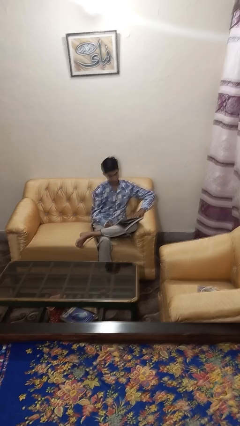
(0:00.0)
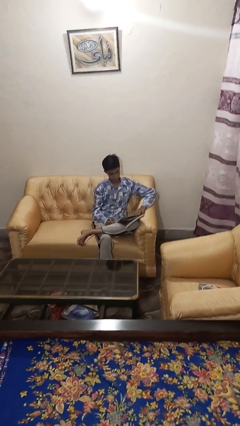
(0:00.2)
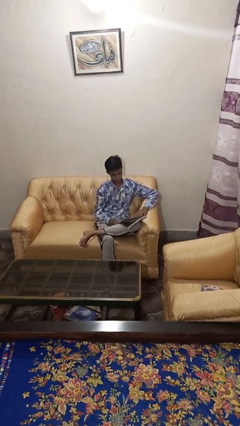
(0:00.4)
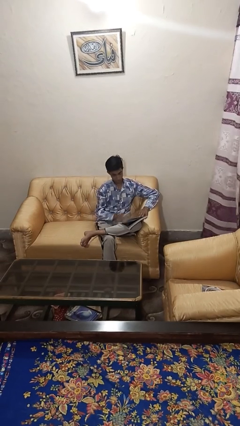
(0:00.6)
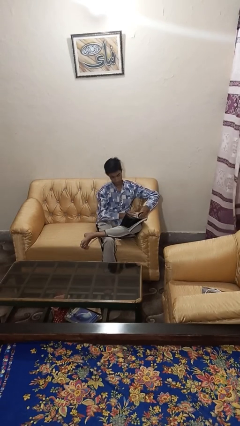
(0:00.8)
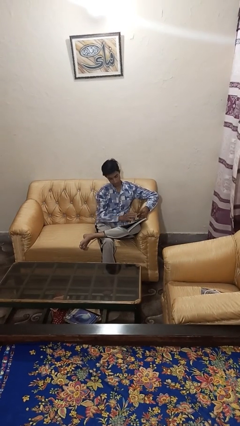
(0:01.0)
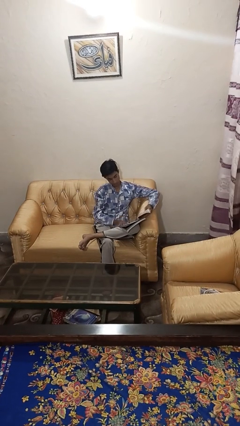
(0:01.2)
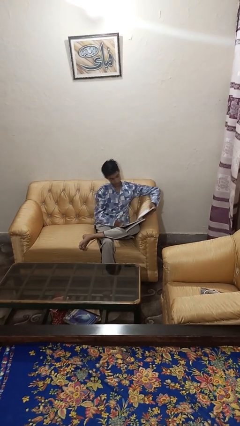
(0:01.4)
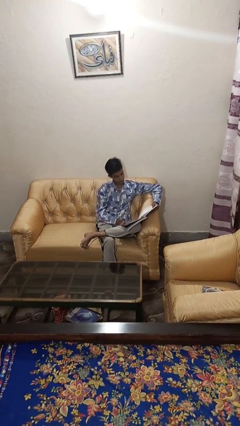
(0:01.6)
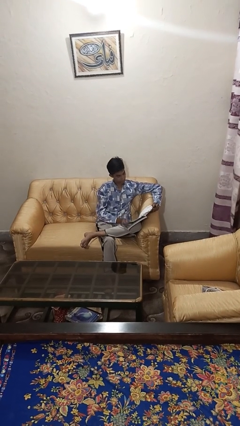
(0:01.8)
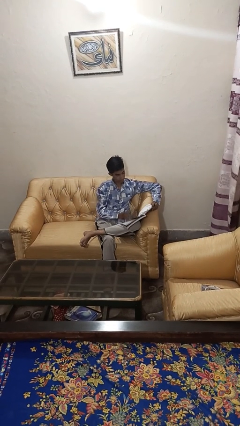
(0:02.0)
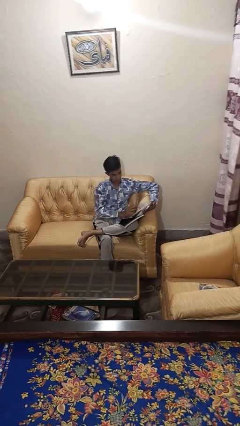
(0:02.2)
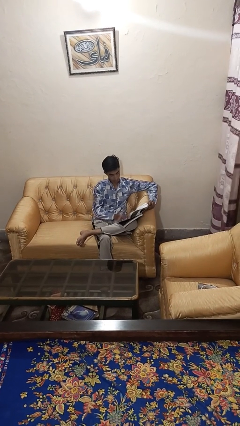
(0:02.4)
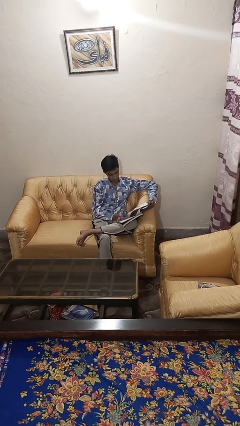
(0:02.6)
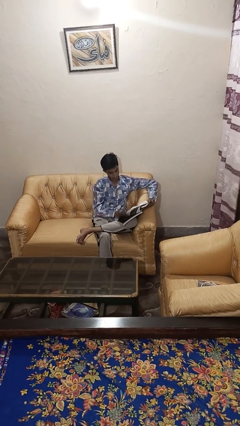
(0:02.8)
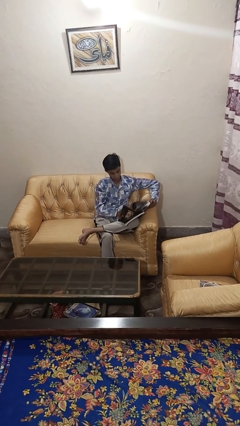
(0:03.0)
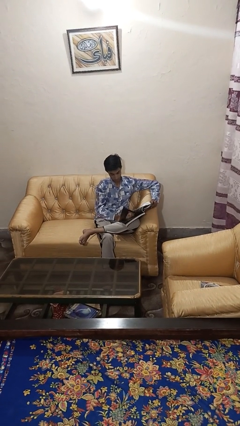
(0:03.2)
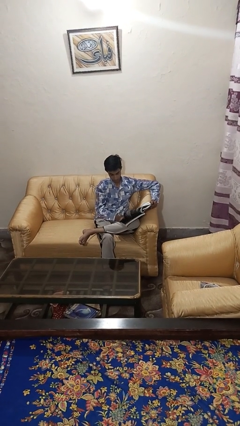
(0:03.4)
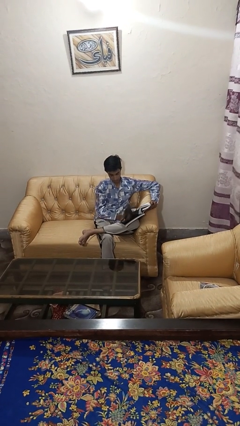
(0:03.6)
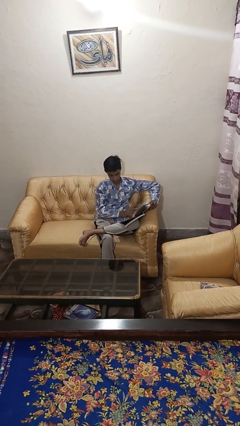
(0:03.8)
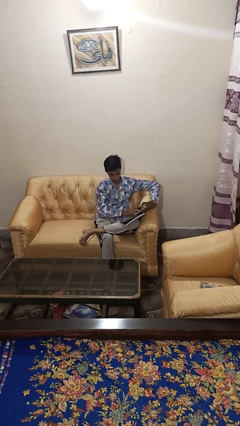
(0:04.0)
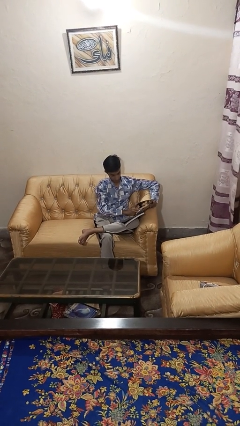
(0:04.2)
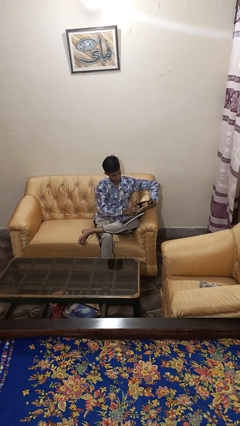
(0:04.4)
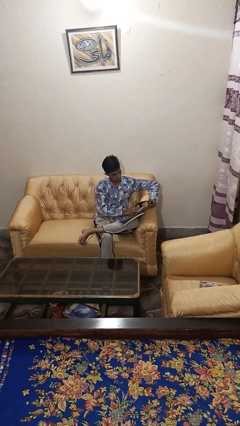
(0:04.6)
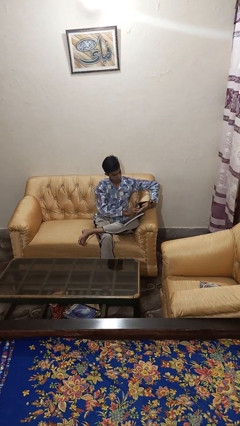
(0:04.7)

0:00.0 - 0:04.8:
person reads magazine

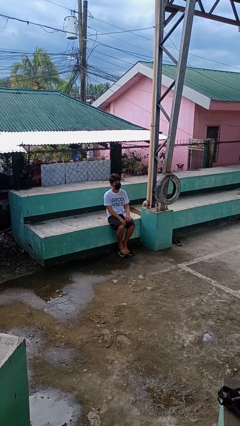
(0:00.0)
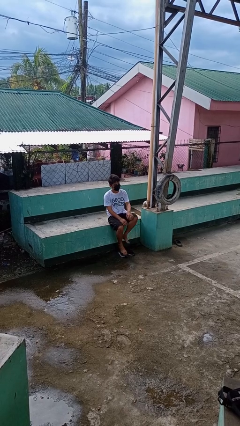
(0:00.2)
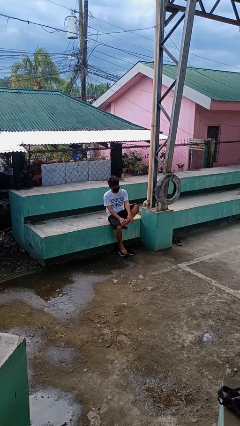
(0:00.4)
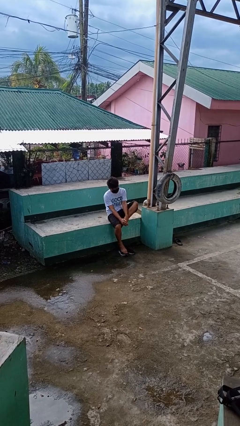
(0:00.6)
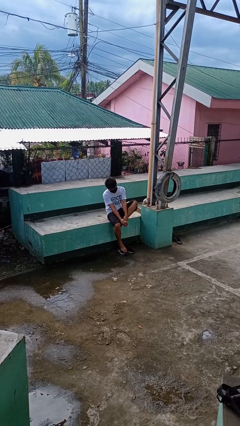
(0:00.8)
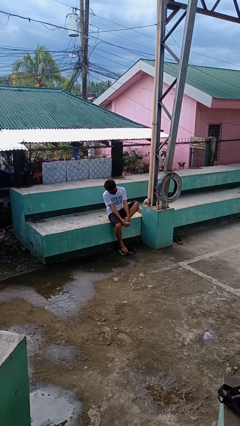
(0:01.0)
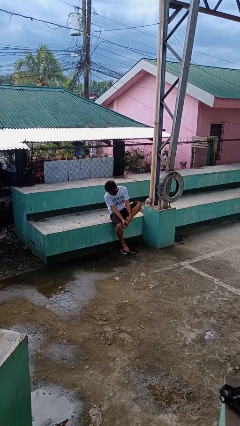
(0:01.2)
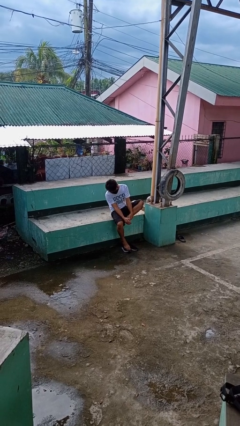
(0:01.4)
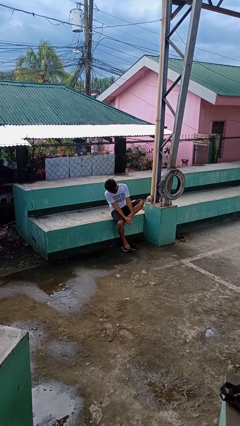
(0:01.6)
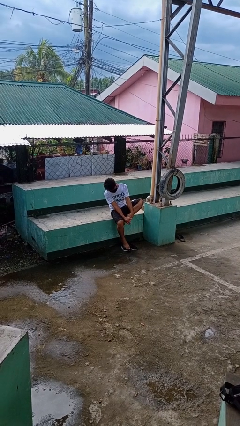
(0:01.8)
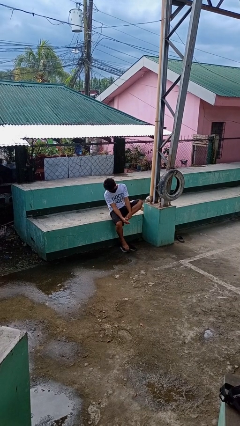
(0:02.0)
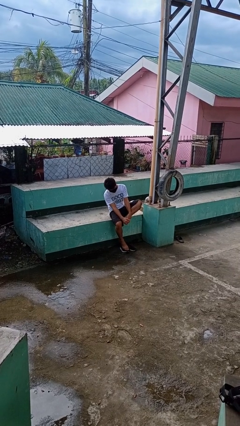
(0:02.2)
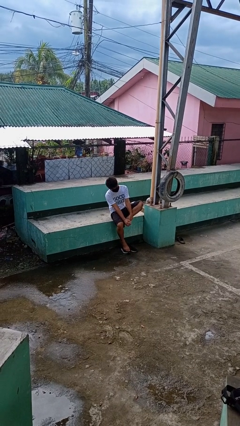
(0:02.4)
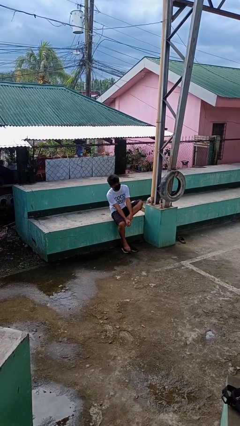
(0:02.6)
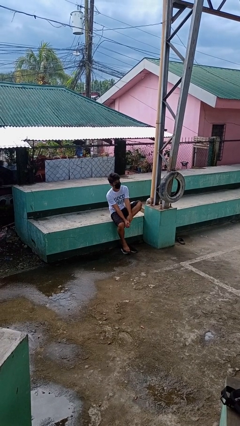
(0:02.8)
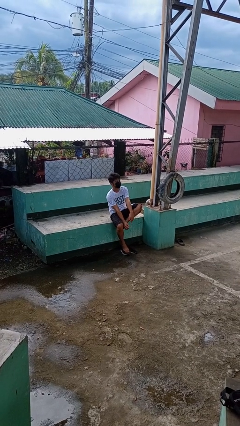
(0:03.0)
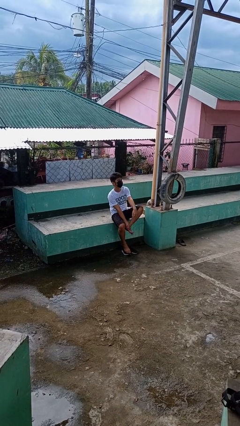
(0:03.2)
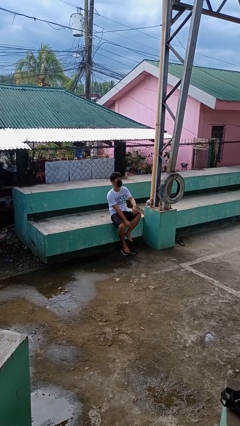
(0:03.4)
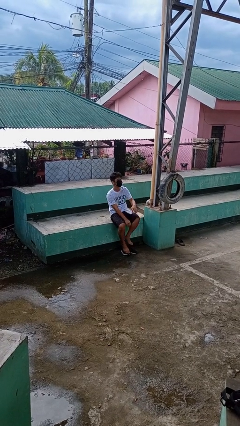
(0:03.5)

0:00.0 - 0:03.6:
person rubs foot

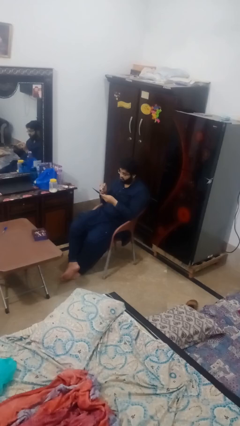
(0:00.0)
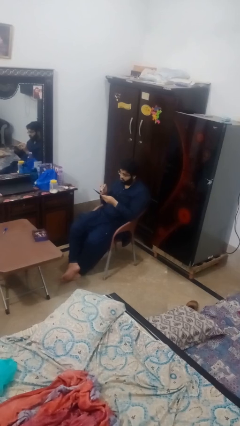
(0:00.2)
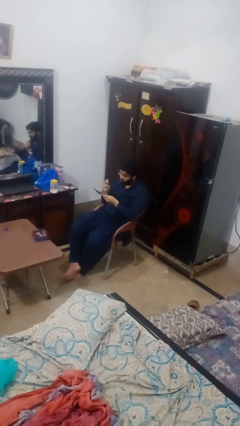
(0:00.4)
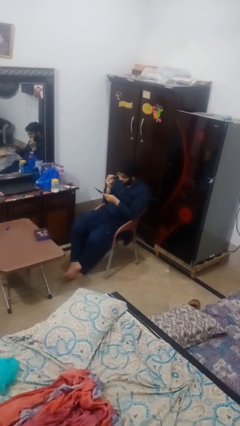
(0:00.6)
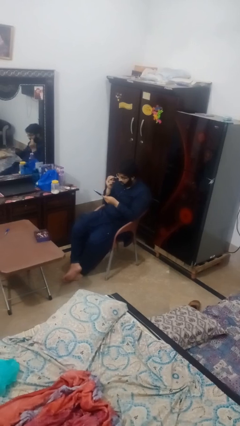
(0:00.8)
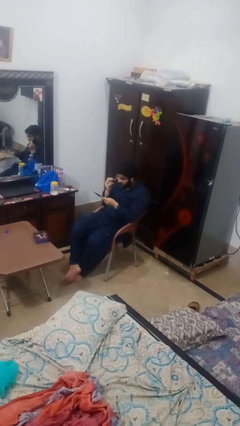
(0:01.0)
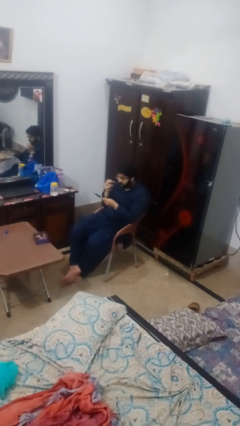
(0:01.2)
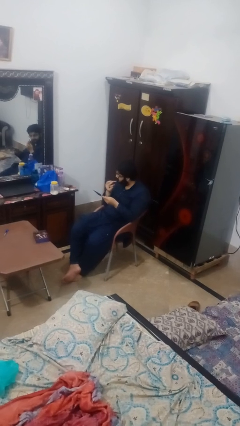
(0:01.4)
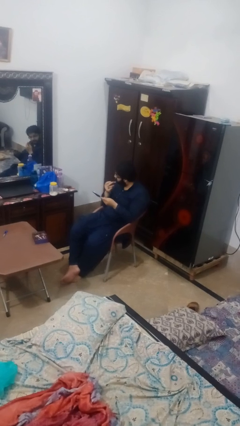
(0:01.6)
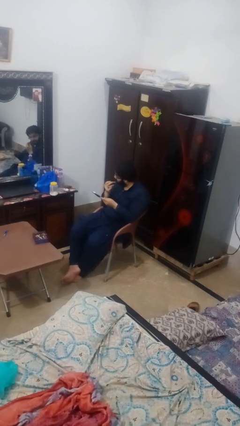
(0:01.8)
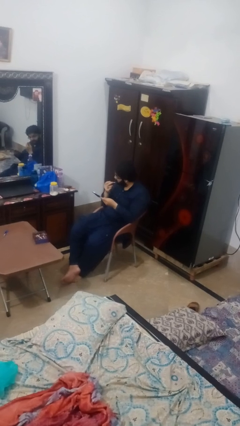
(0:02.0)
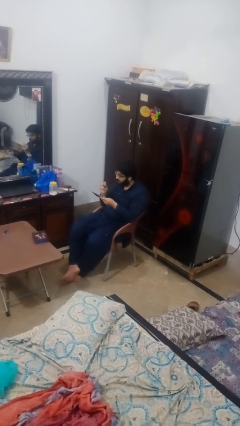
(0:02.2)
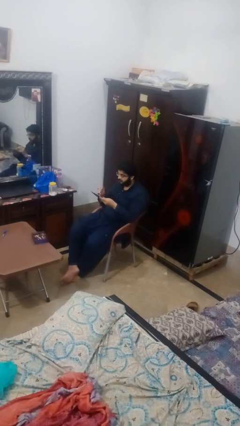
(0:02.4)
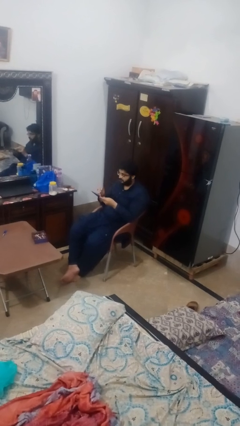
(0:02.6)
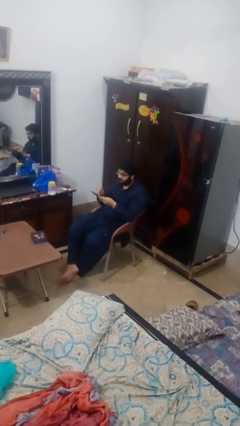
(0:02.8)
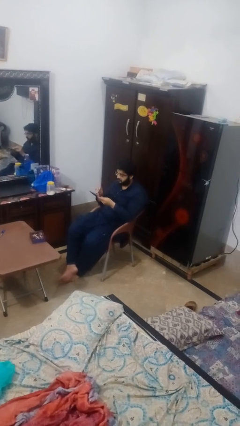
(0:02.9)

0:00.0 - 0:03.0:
person applies foundation makeup

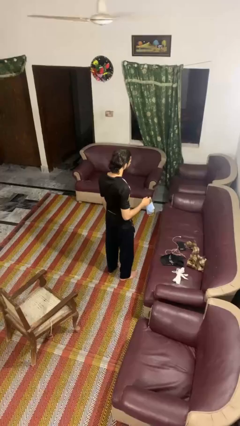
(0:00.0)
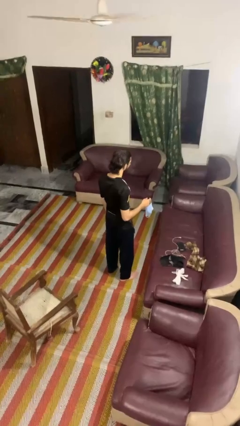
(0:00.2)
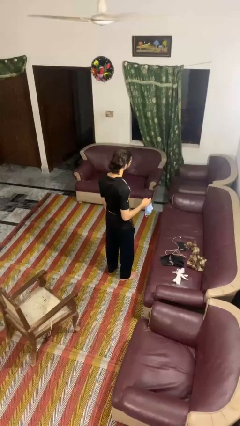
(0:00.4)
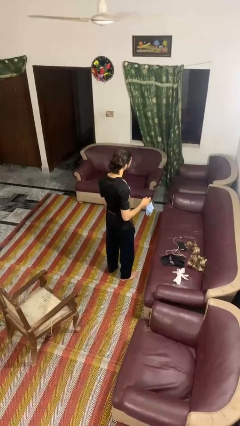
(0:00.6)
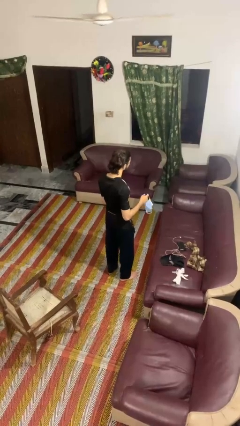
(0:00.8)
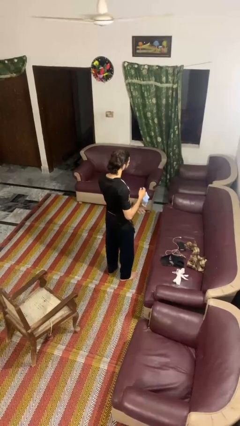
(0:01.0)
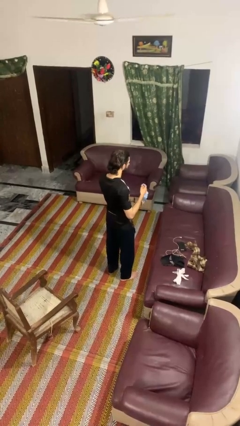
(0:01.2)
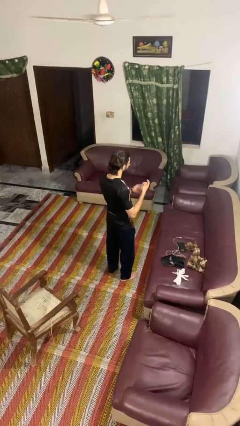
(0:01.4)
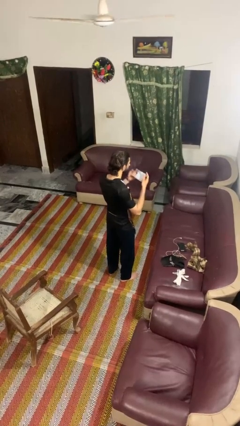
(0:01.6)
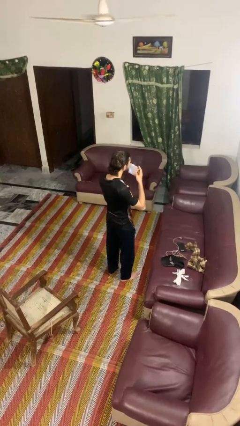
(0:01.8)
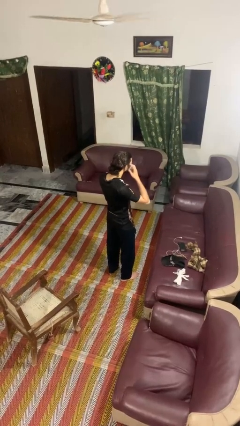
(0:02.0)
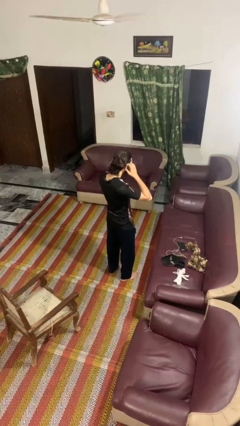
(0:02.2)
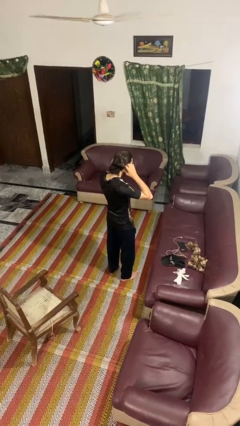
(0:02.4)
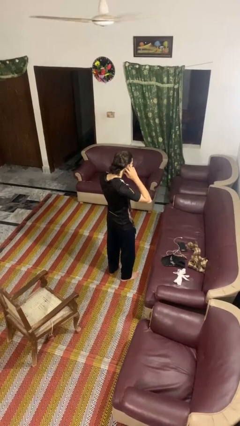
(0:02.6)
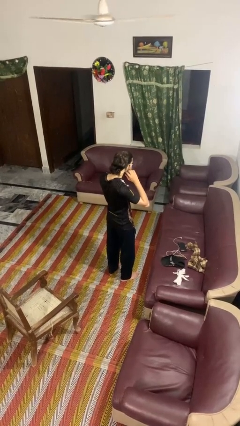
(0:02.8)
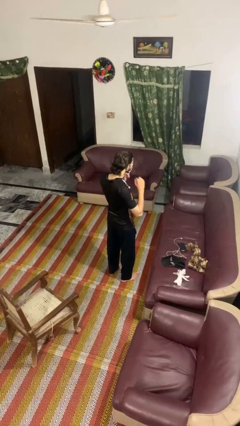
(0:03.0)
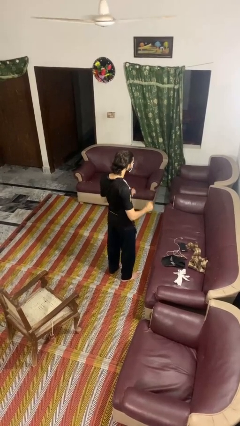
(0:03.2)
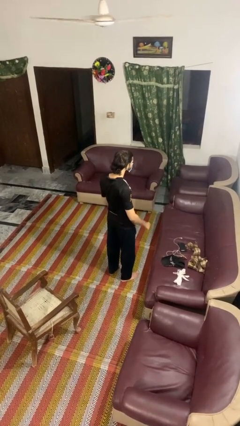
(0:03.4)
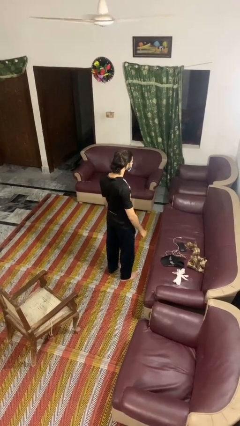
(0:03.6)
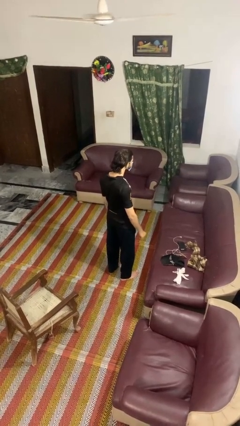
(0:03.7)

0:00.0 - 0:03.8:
person puts on facemask

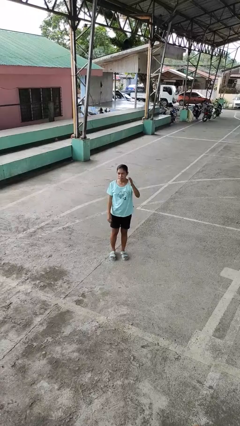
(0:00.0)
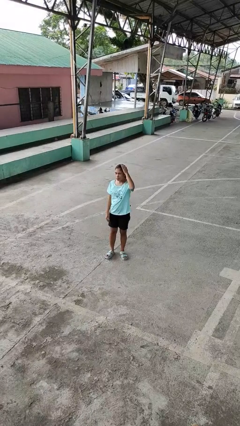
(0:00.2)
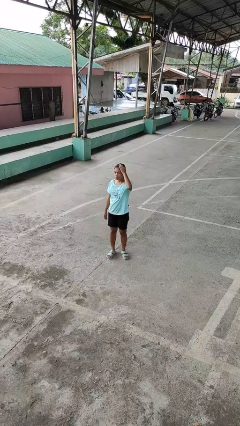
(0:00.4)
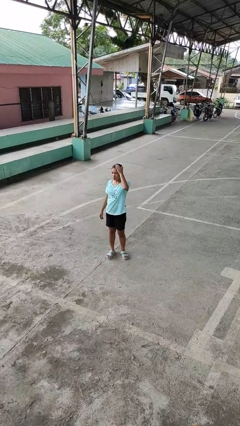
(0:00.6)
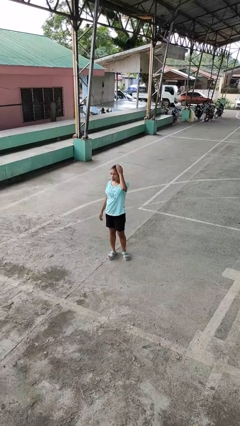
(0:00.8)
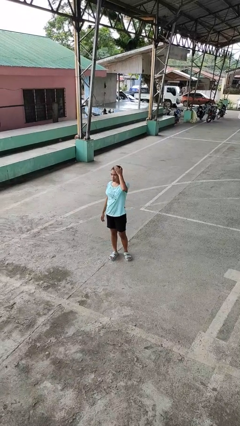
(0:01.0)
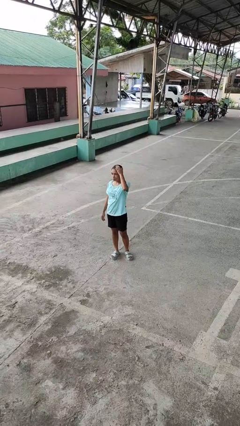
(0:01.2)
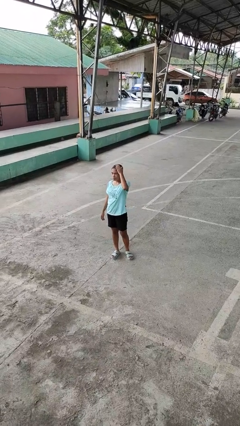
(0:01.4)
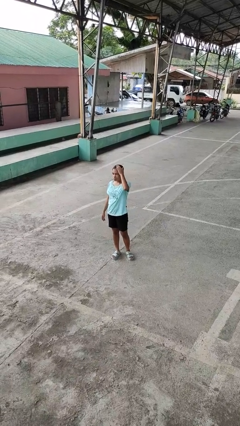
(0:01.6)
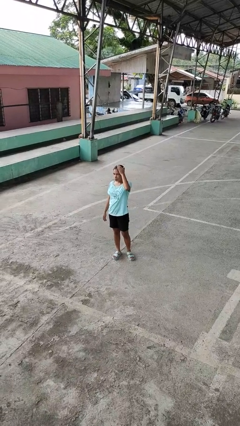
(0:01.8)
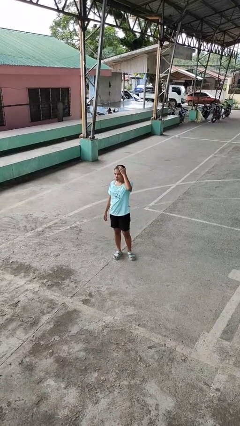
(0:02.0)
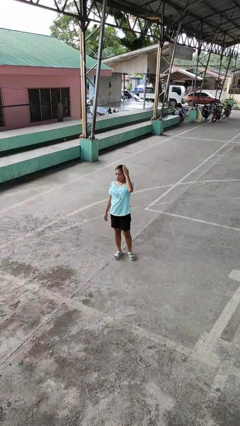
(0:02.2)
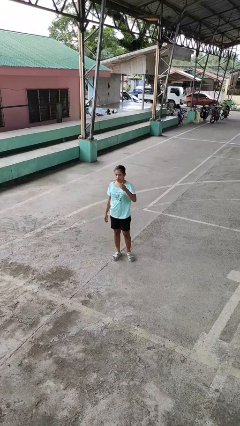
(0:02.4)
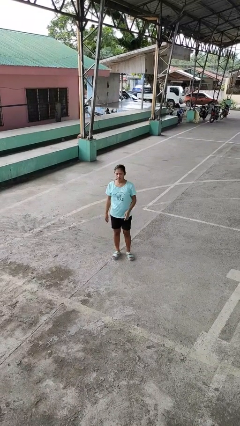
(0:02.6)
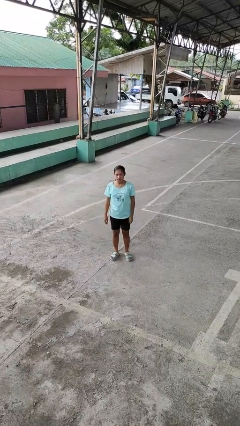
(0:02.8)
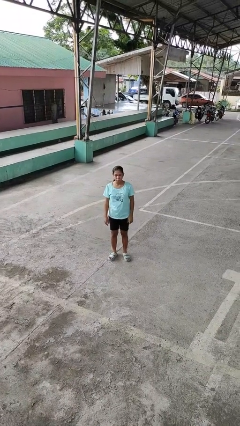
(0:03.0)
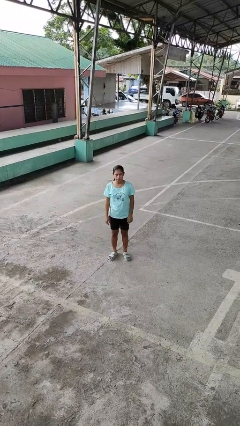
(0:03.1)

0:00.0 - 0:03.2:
person pats head
